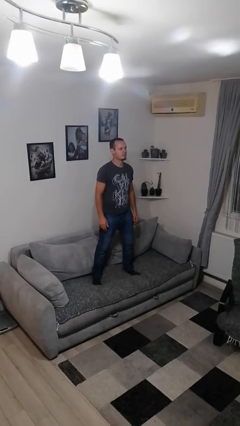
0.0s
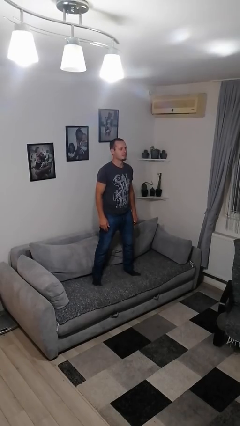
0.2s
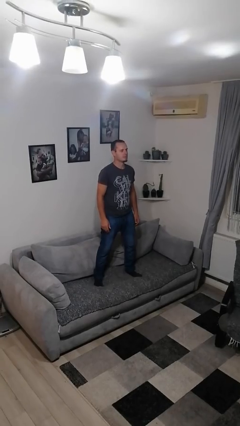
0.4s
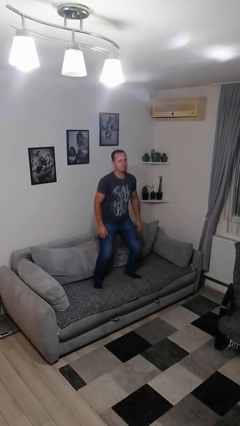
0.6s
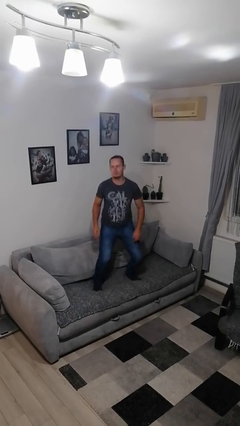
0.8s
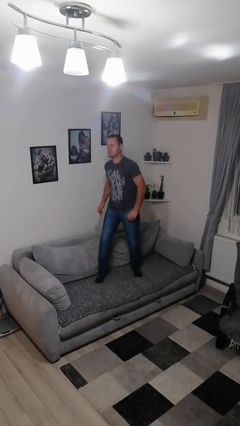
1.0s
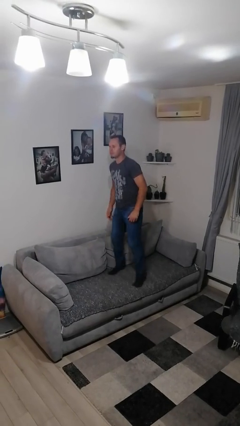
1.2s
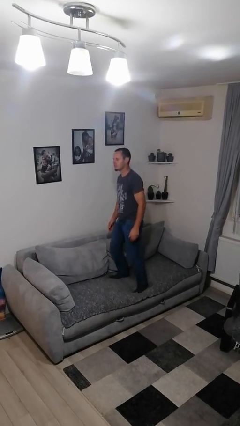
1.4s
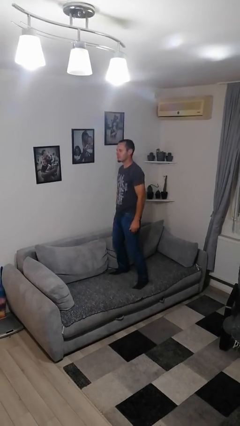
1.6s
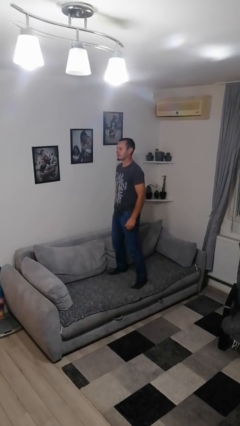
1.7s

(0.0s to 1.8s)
person jumps on couch

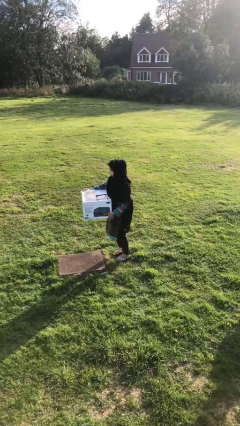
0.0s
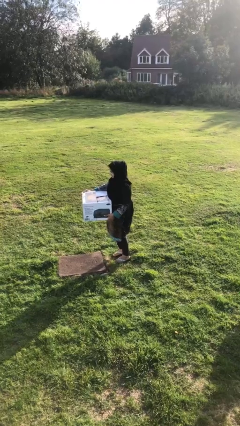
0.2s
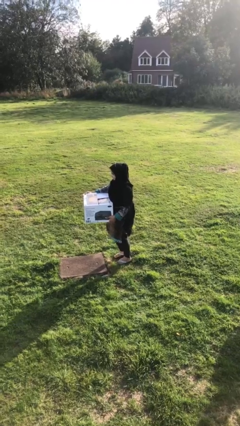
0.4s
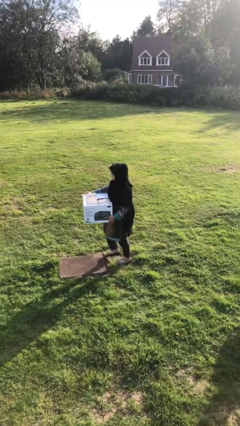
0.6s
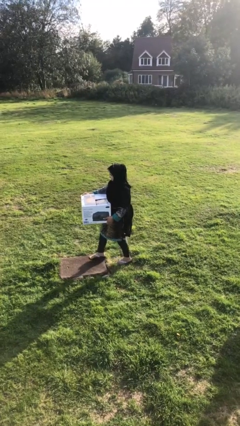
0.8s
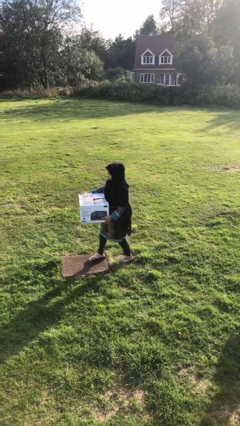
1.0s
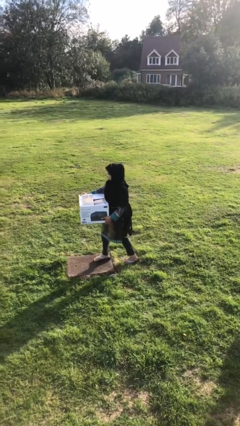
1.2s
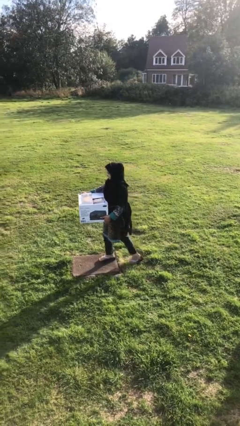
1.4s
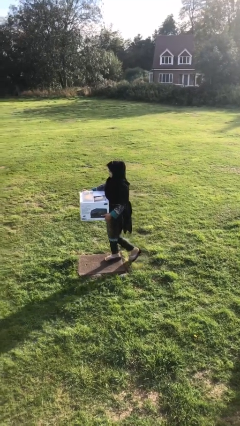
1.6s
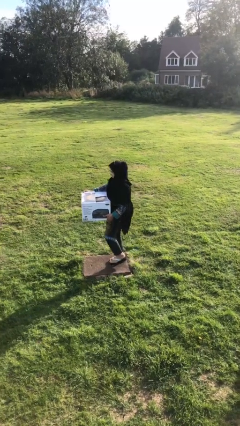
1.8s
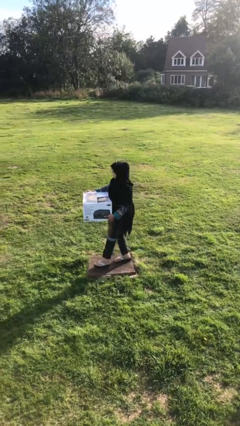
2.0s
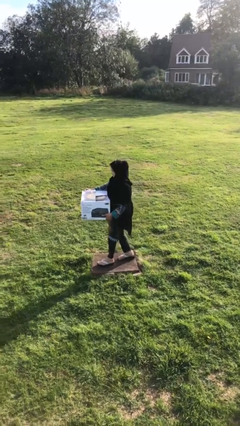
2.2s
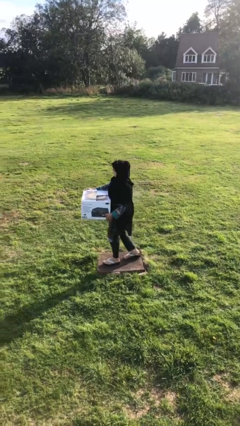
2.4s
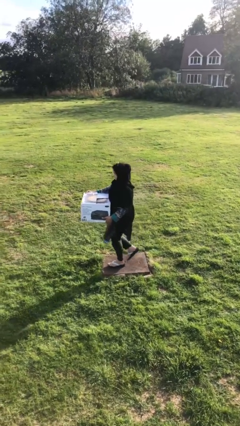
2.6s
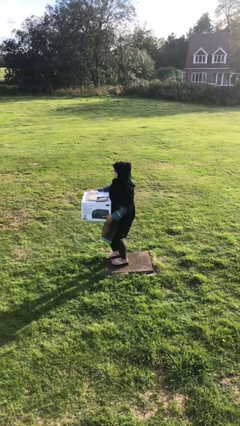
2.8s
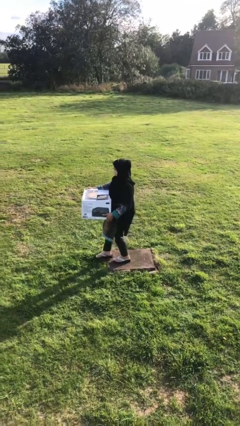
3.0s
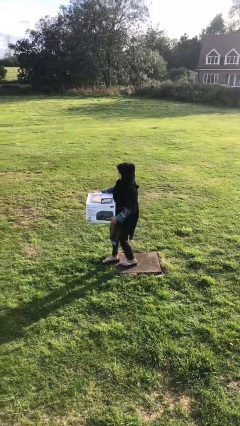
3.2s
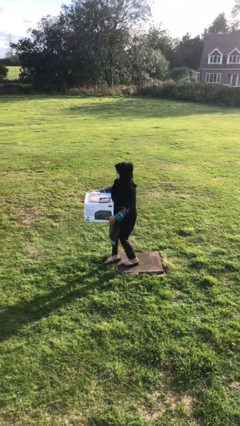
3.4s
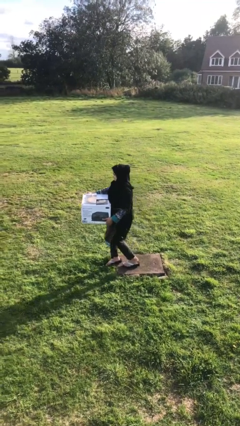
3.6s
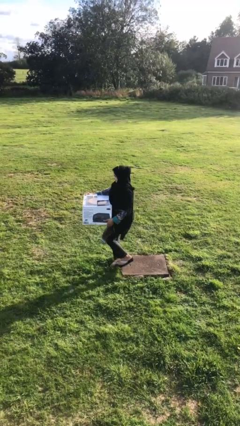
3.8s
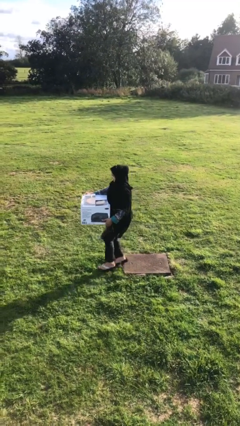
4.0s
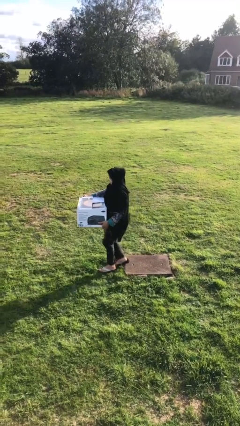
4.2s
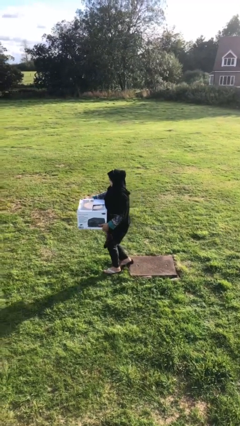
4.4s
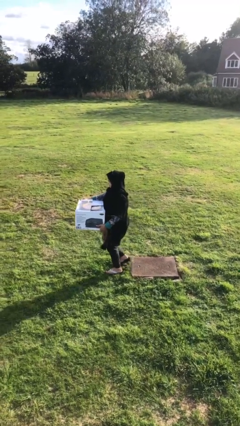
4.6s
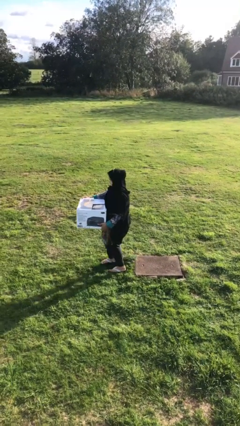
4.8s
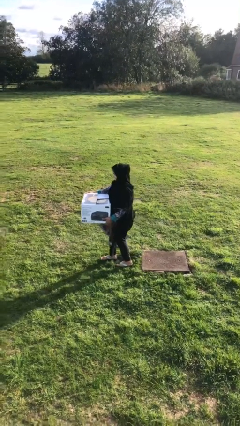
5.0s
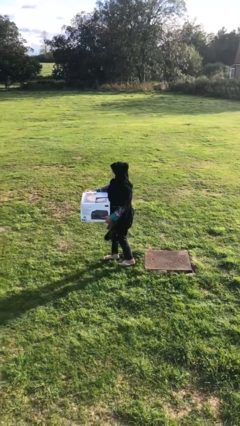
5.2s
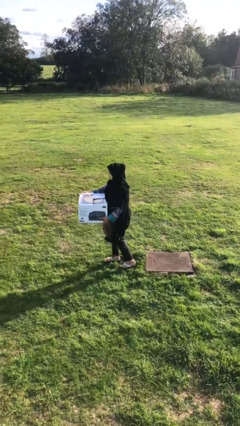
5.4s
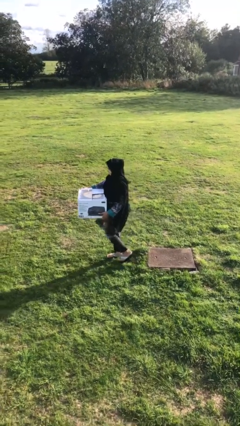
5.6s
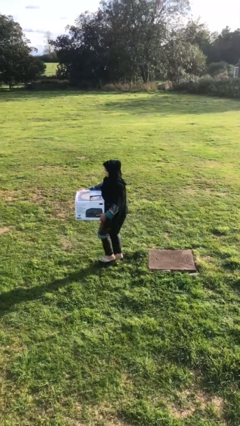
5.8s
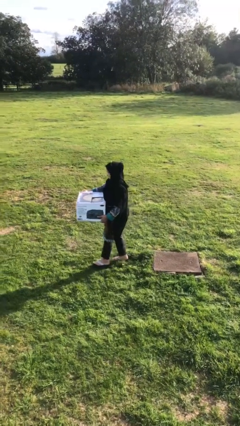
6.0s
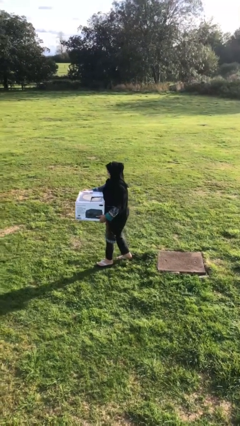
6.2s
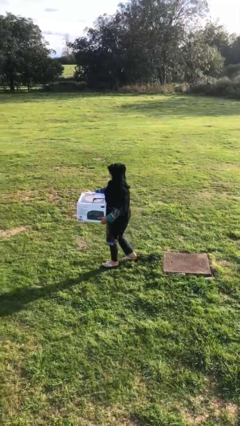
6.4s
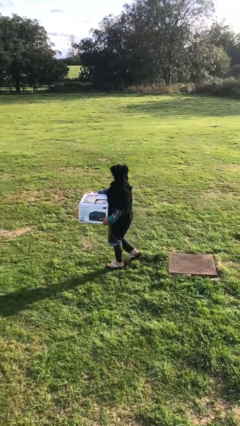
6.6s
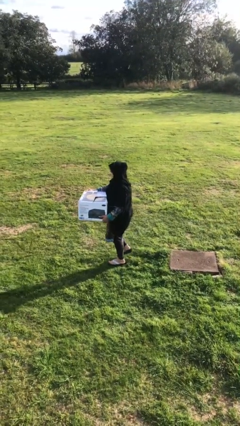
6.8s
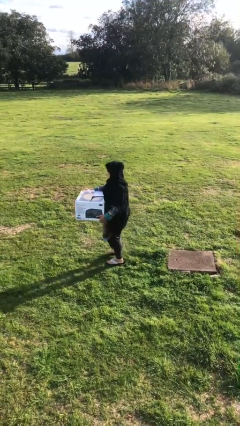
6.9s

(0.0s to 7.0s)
person carries heavy object

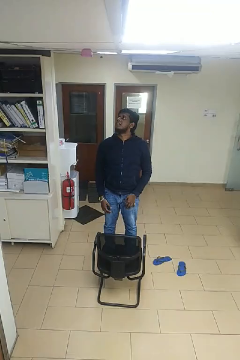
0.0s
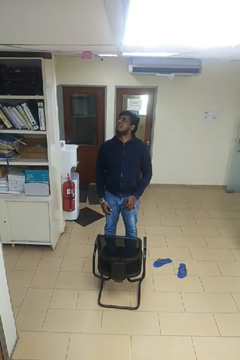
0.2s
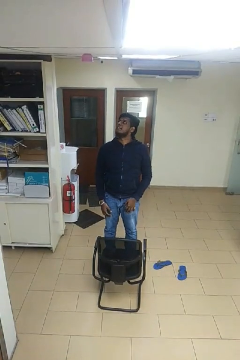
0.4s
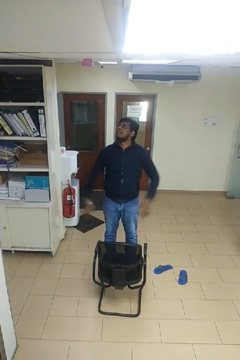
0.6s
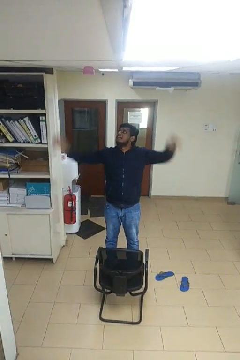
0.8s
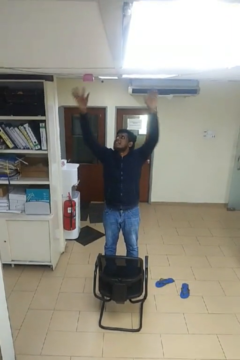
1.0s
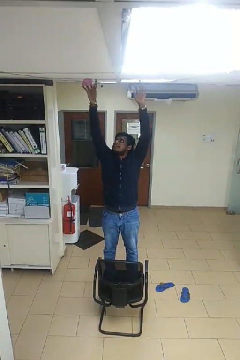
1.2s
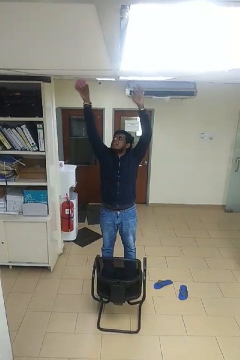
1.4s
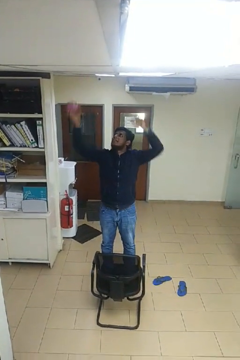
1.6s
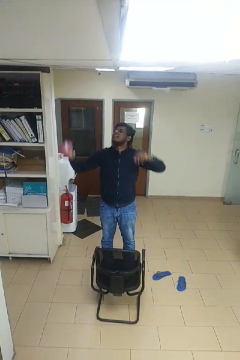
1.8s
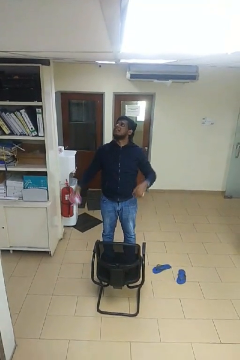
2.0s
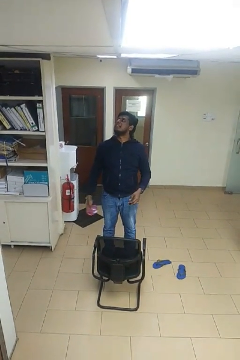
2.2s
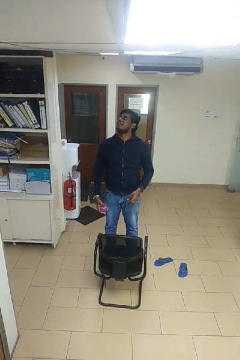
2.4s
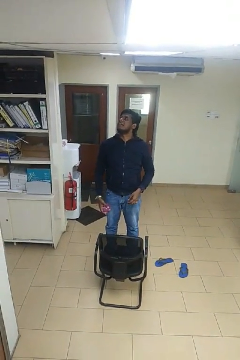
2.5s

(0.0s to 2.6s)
person takes down smoke detector

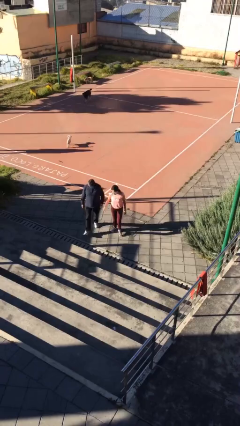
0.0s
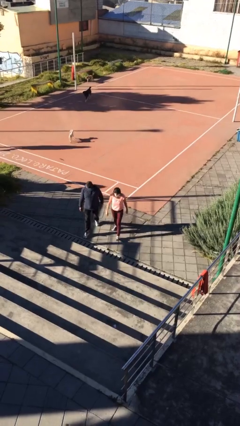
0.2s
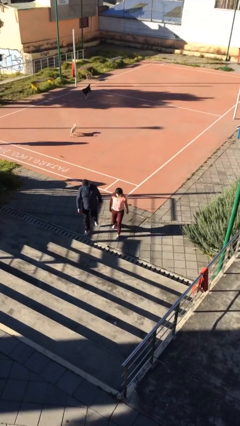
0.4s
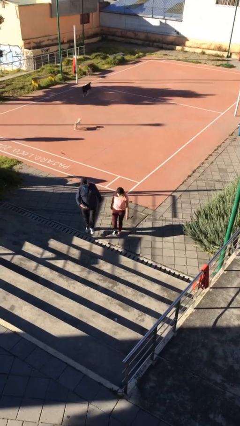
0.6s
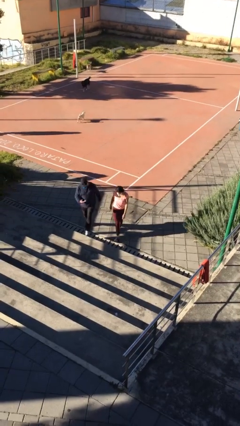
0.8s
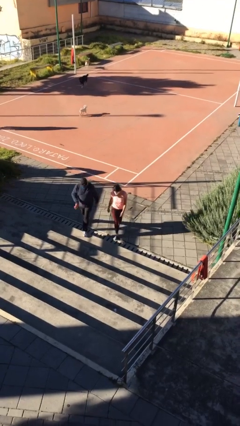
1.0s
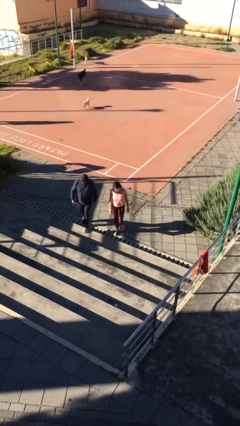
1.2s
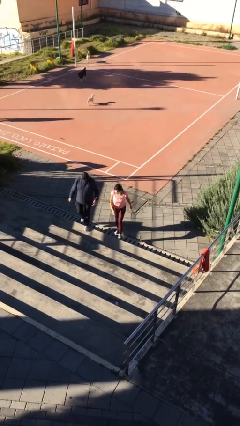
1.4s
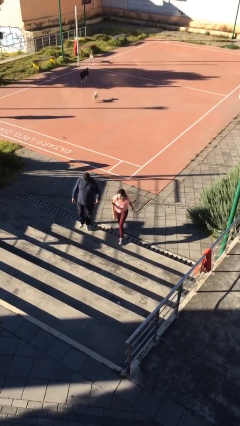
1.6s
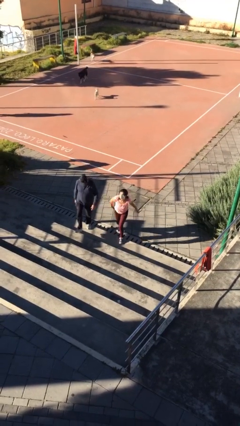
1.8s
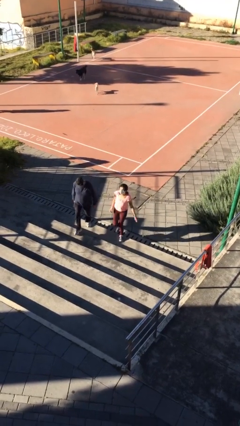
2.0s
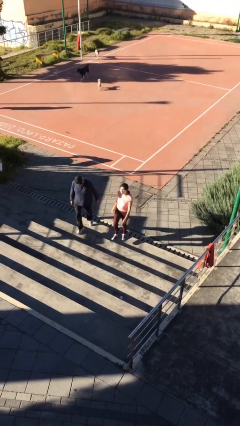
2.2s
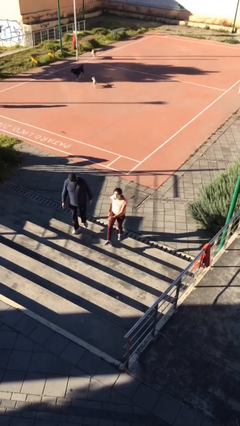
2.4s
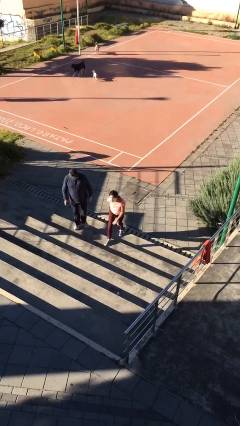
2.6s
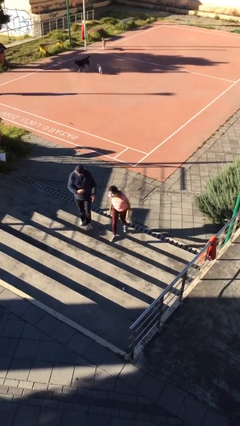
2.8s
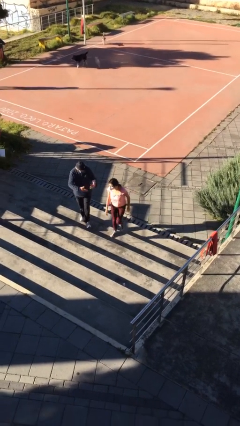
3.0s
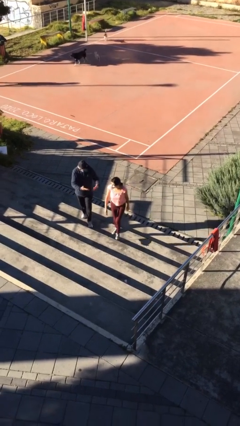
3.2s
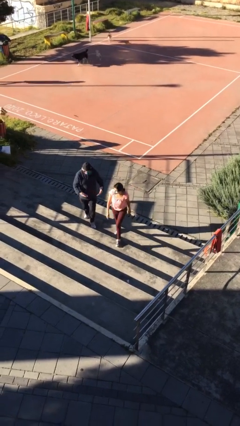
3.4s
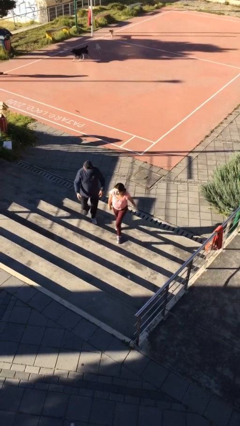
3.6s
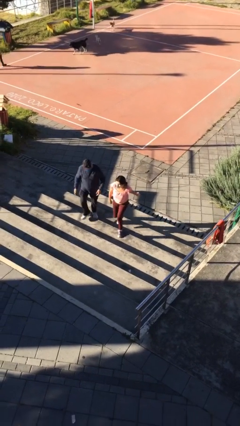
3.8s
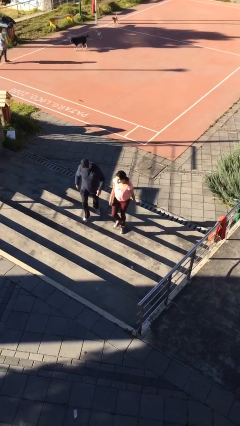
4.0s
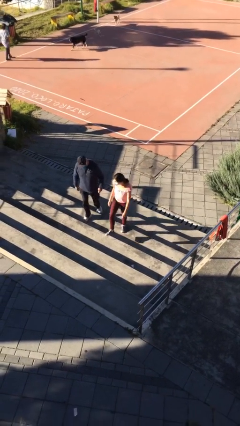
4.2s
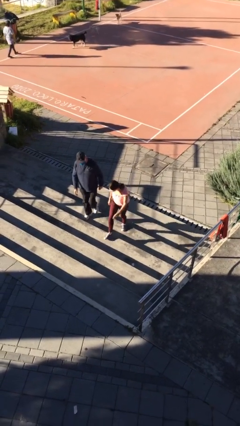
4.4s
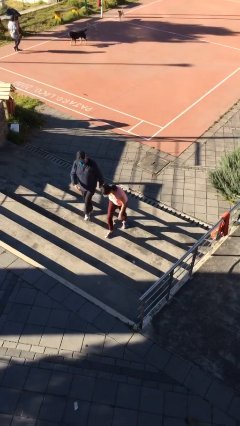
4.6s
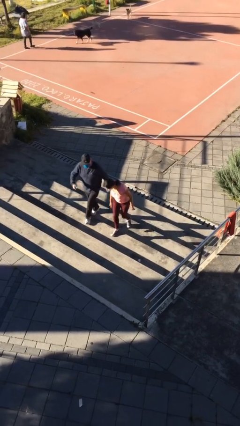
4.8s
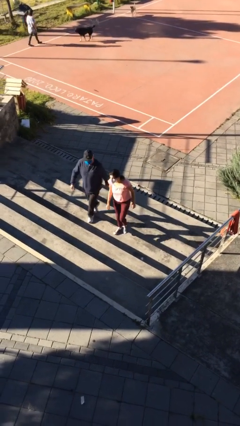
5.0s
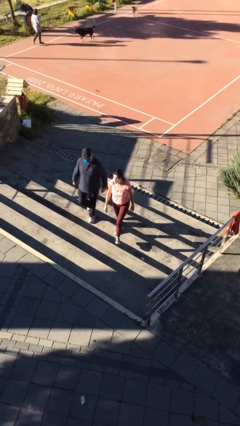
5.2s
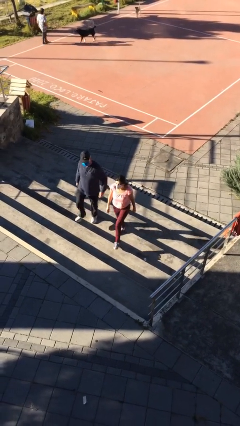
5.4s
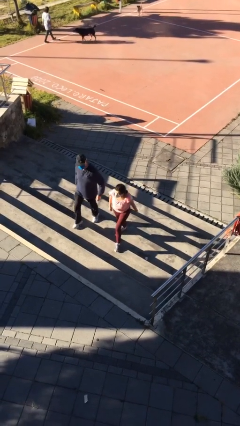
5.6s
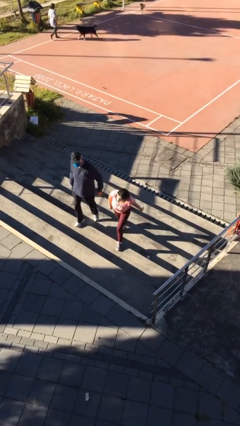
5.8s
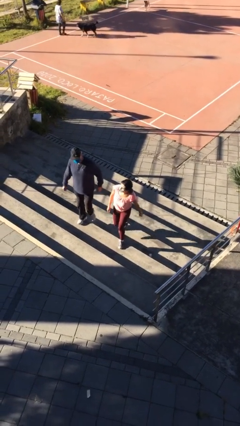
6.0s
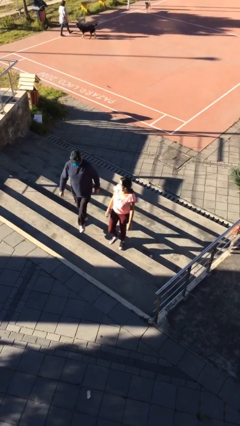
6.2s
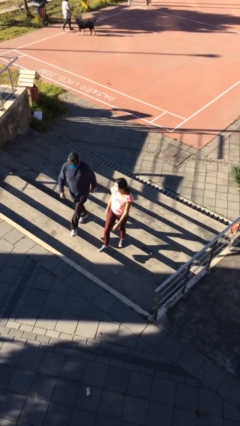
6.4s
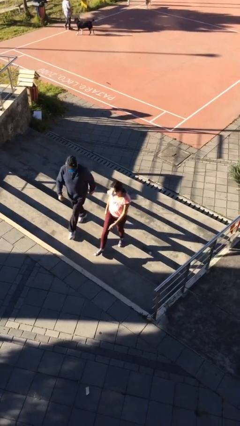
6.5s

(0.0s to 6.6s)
person talks to person

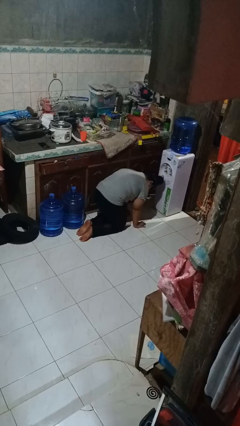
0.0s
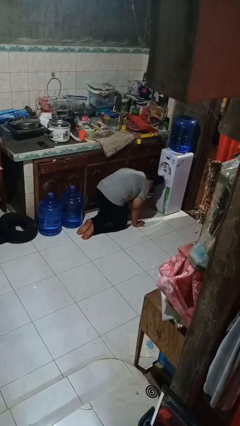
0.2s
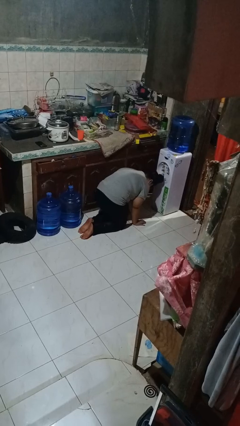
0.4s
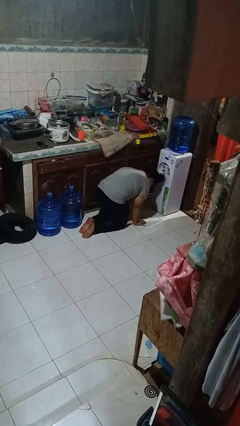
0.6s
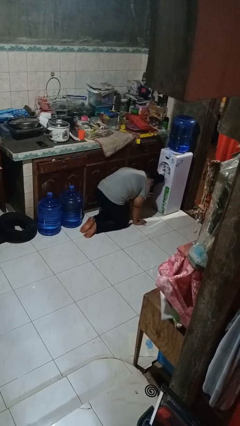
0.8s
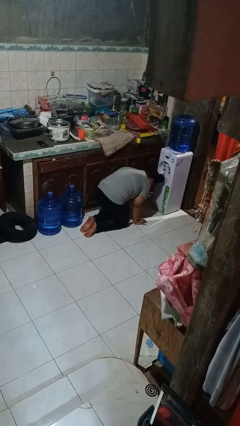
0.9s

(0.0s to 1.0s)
person crawls
